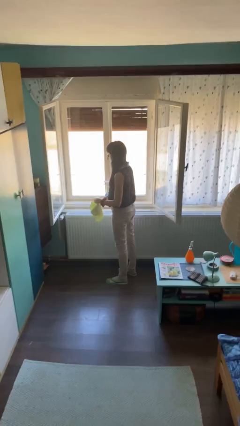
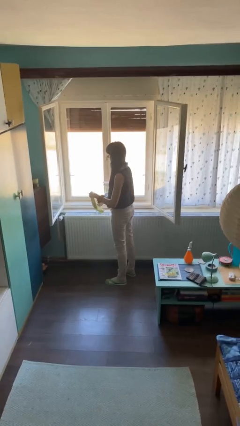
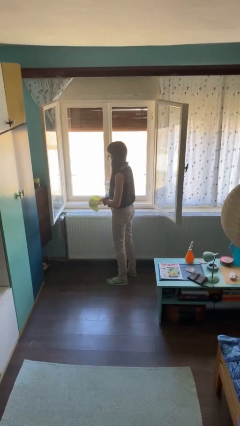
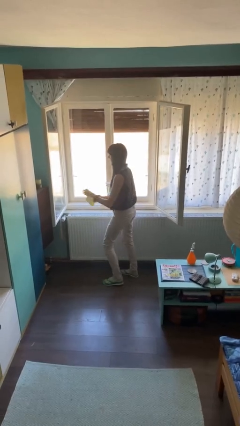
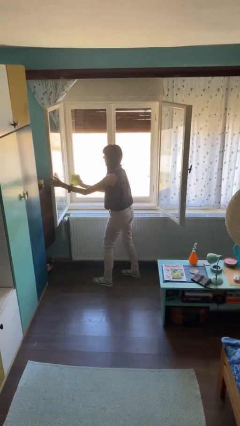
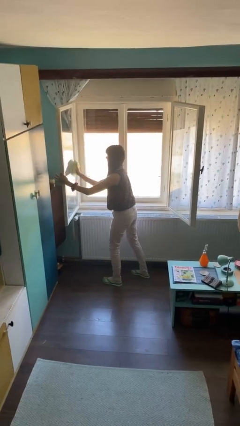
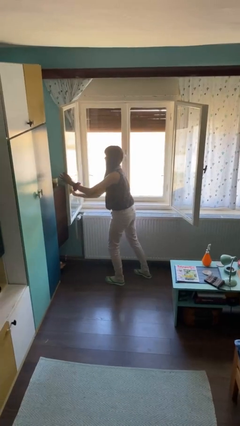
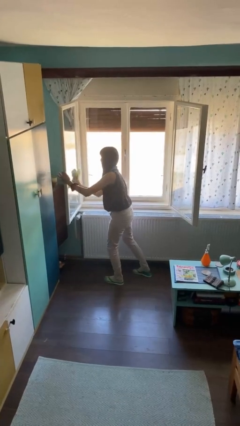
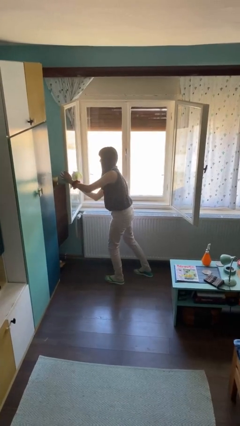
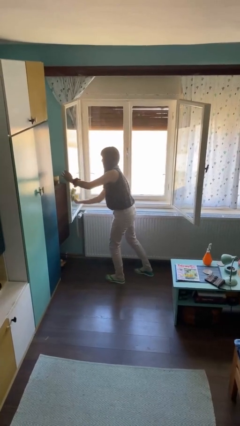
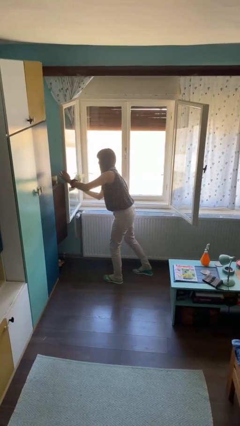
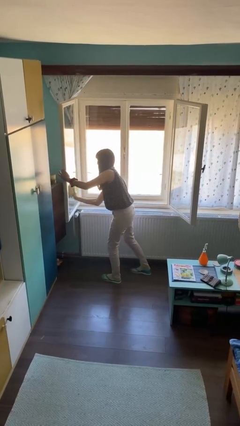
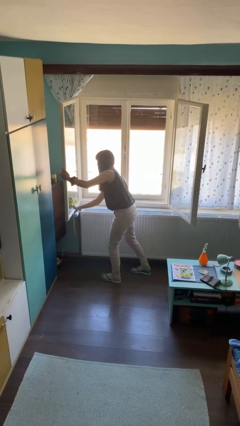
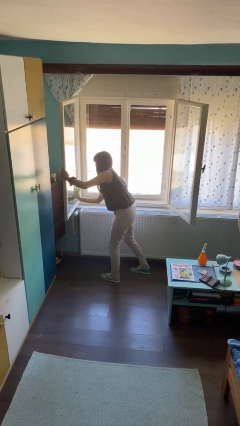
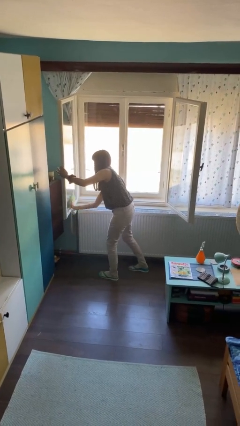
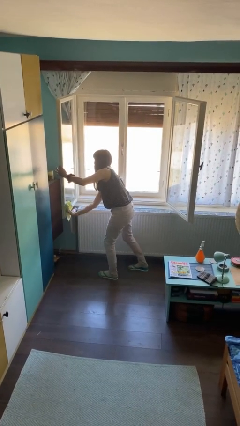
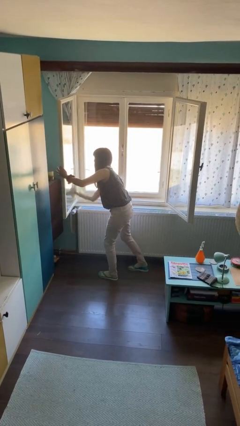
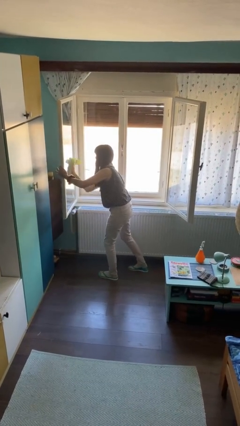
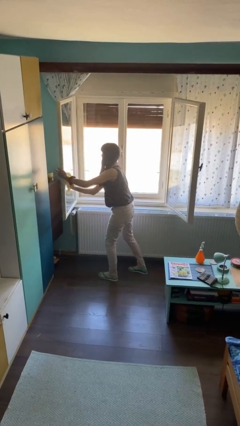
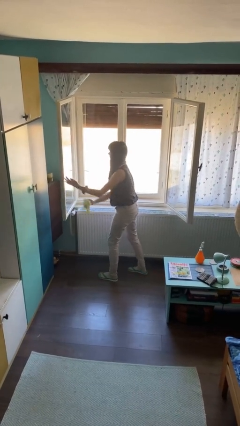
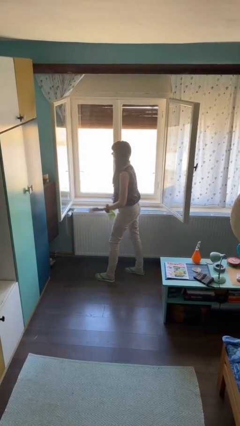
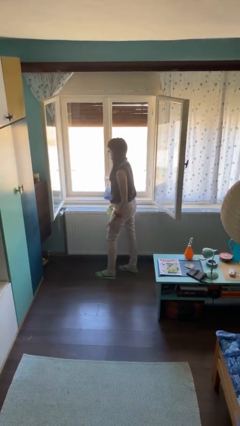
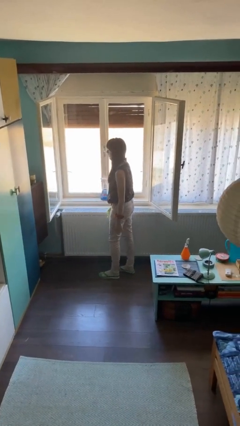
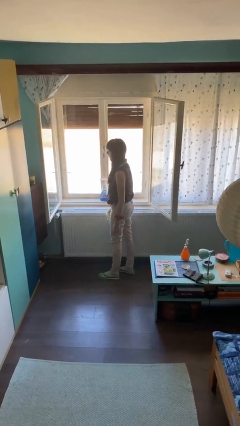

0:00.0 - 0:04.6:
person washes window

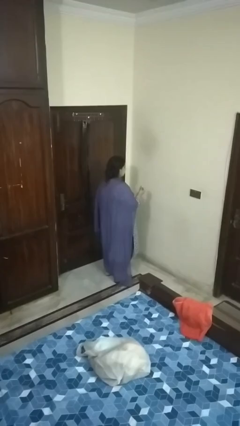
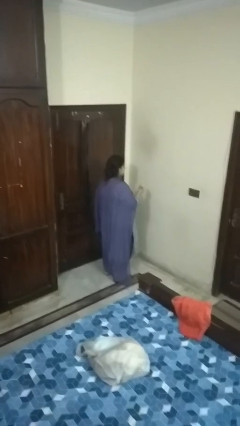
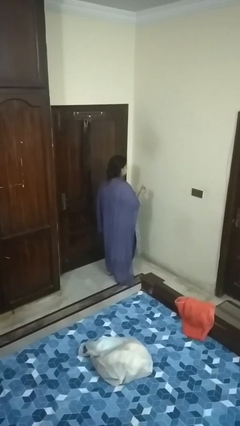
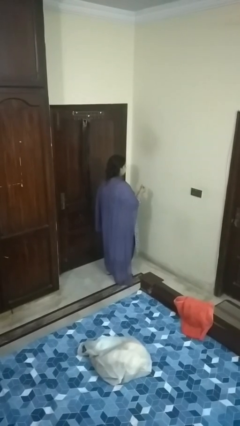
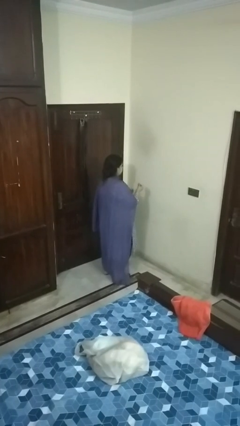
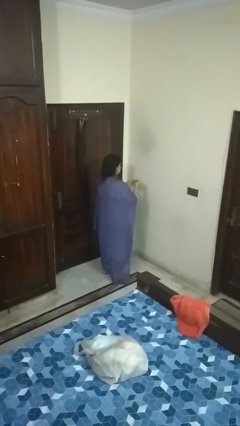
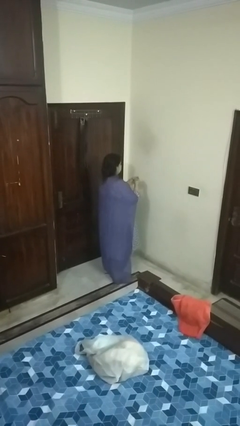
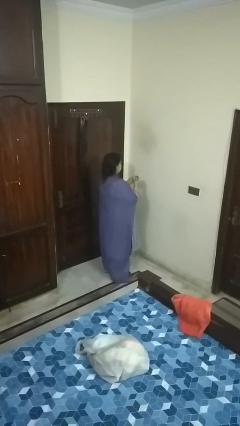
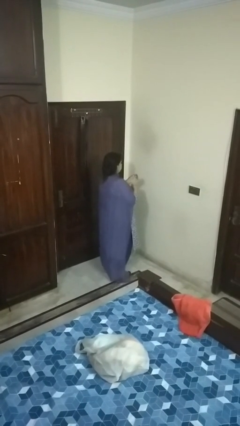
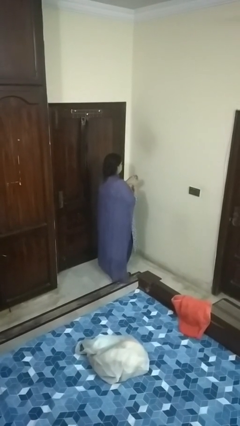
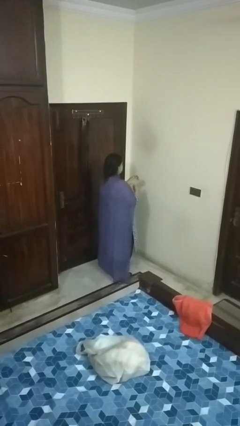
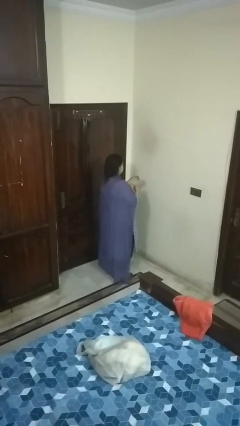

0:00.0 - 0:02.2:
person puts on ring

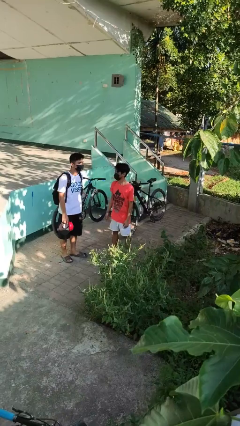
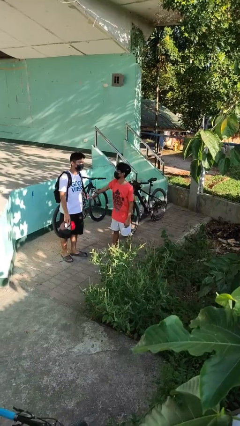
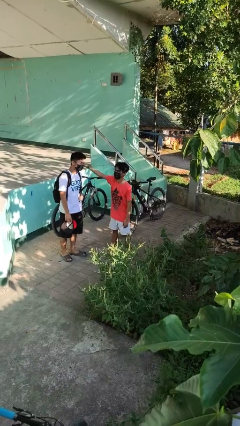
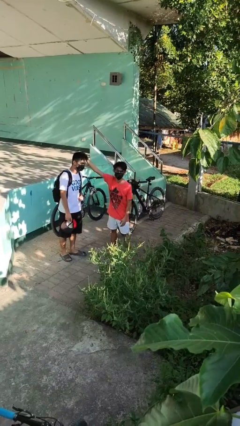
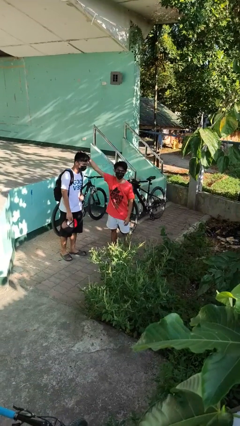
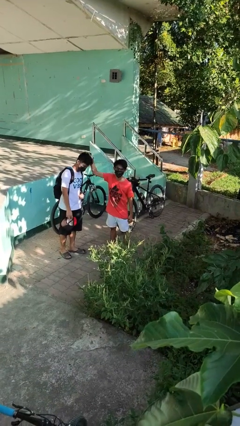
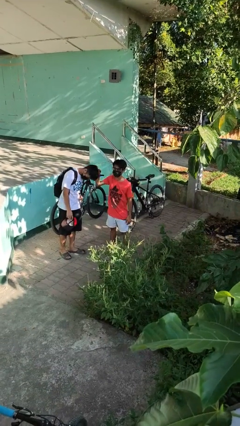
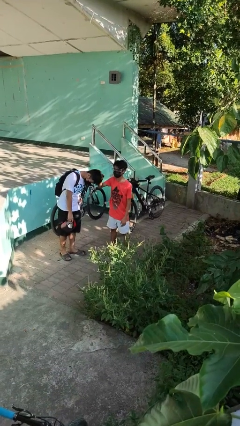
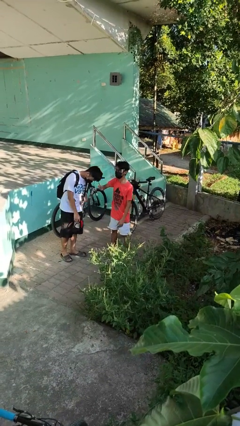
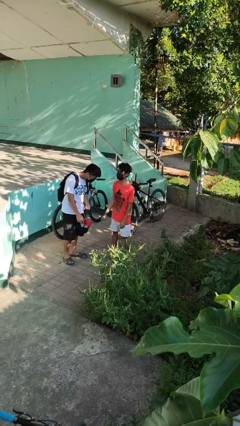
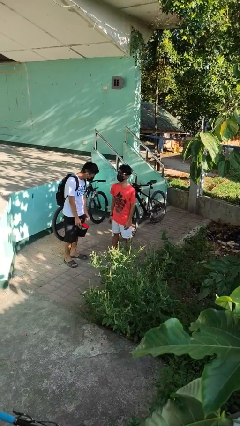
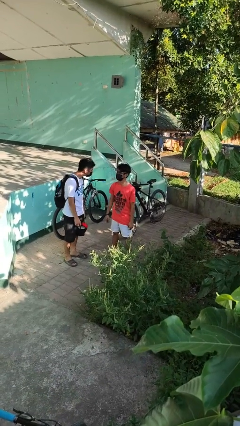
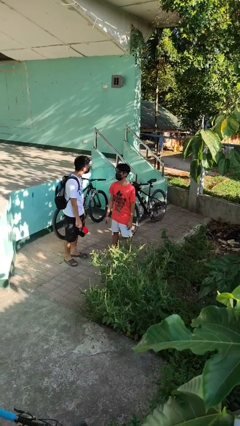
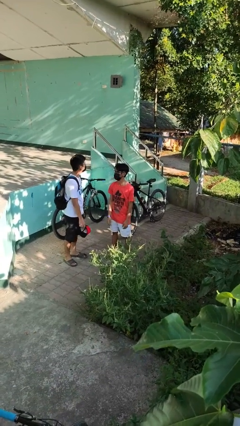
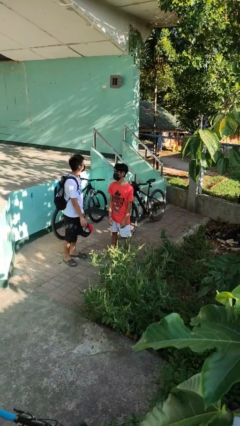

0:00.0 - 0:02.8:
person grabs person by hair

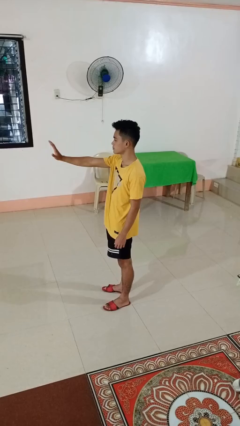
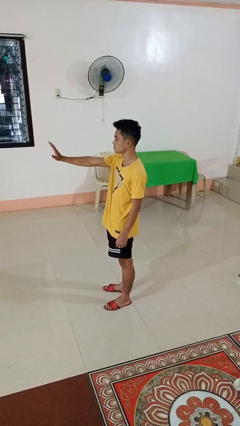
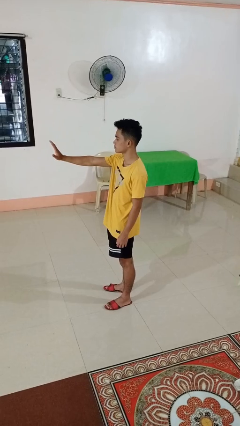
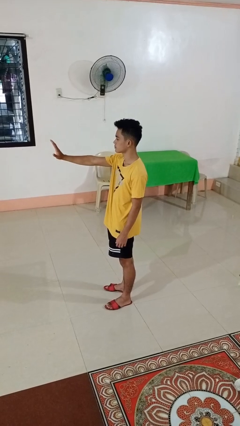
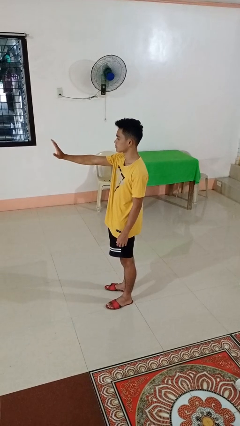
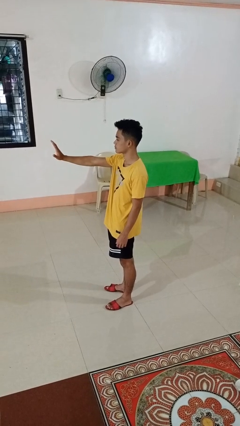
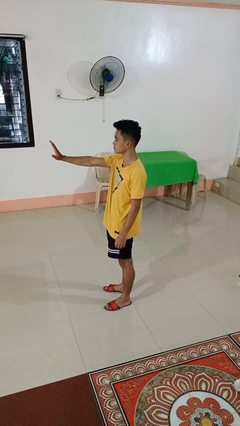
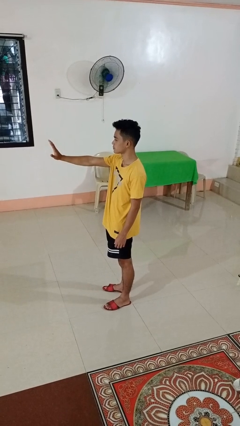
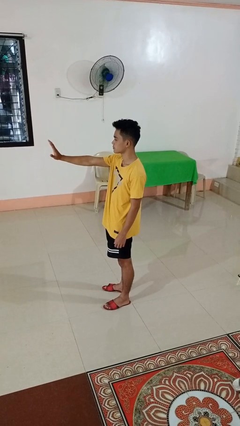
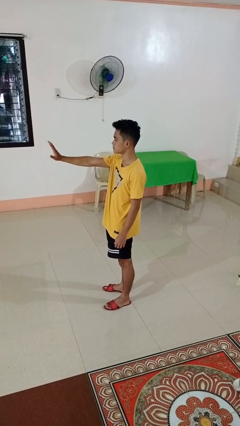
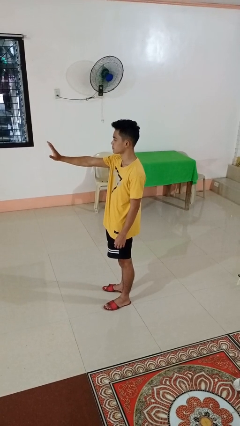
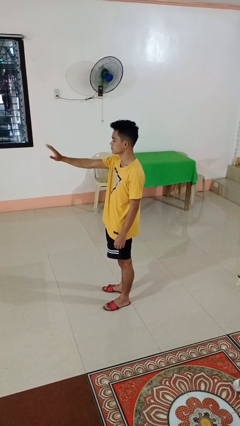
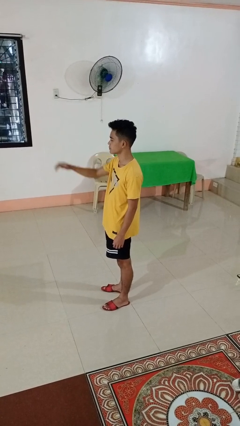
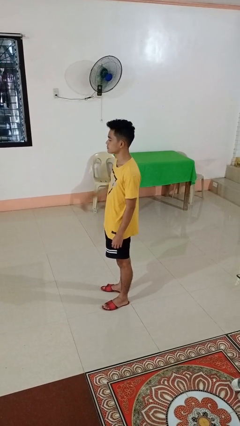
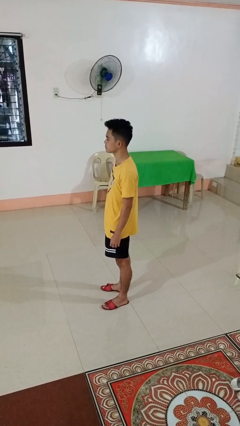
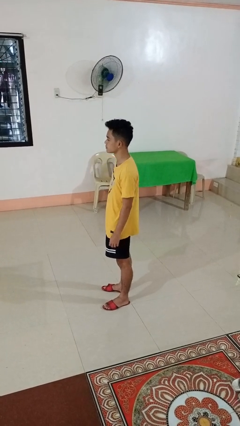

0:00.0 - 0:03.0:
person gestures stop

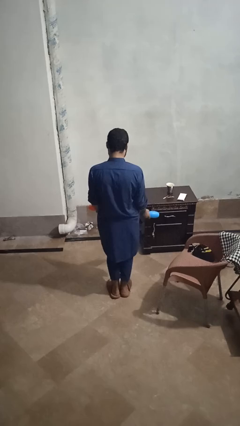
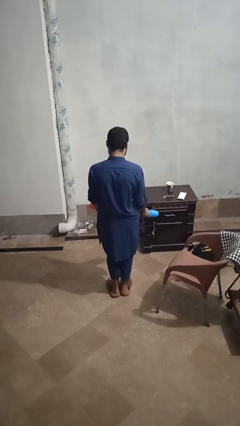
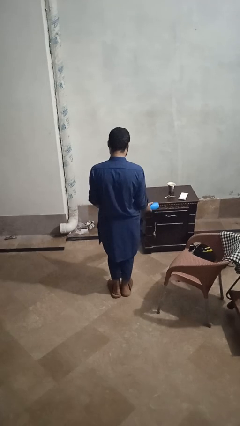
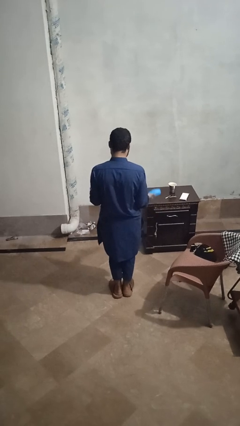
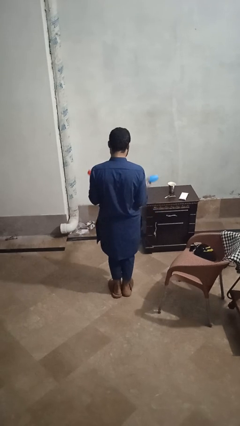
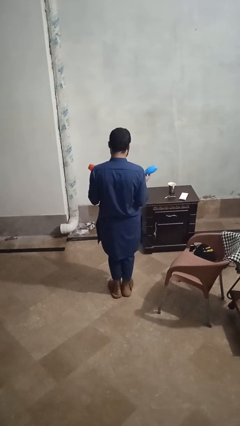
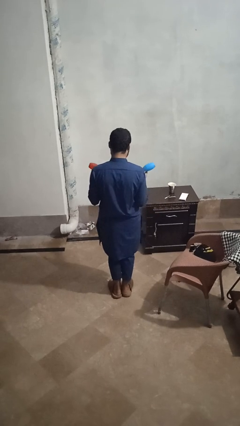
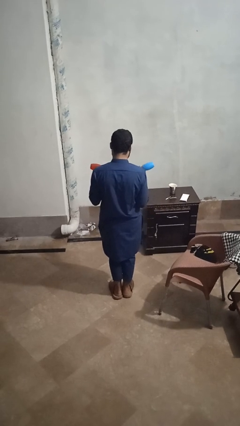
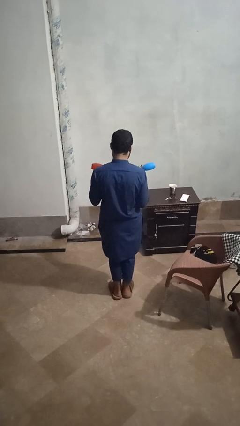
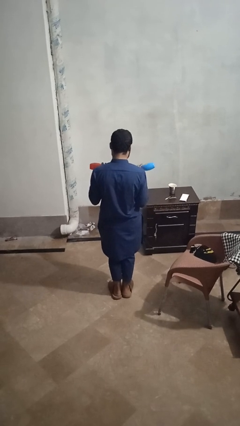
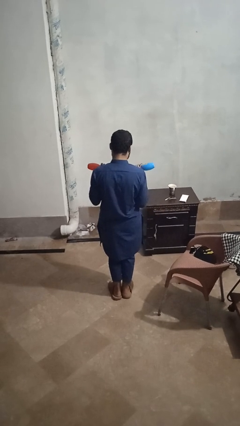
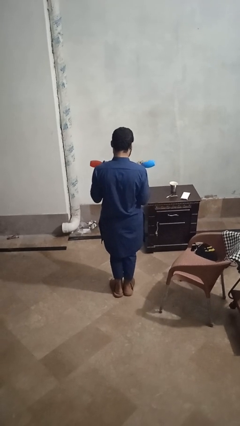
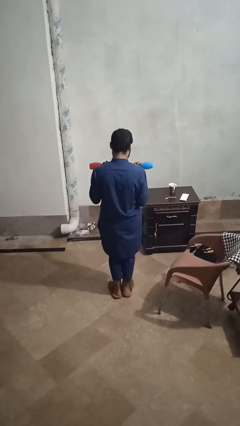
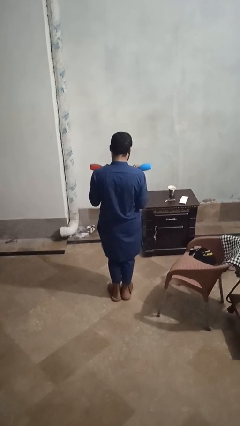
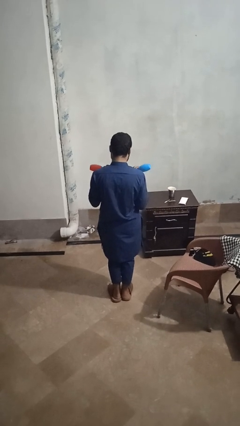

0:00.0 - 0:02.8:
person lifts dumbbells

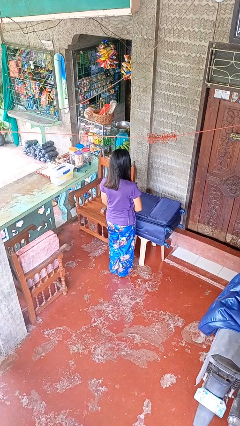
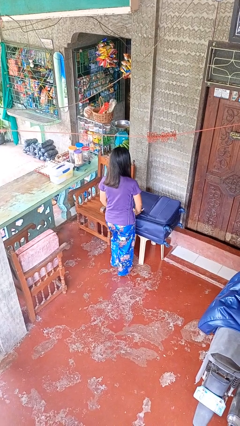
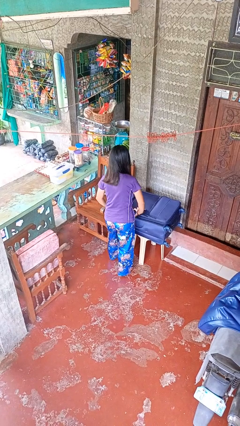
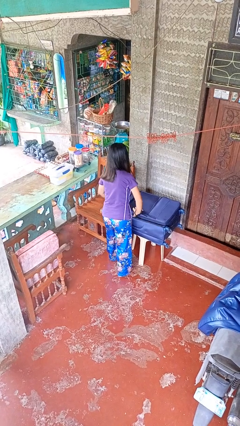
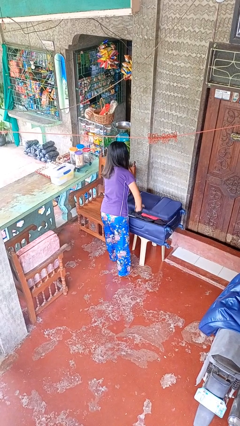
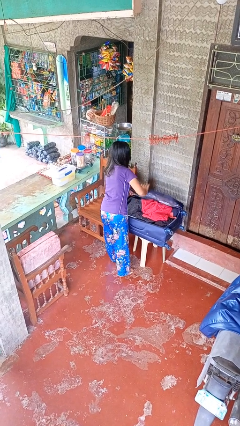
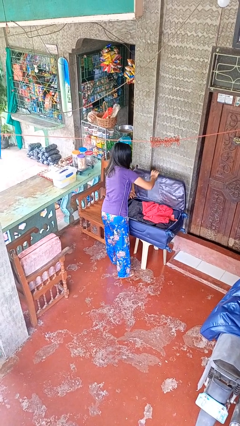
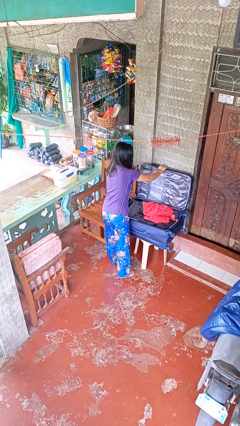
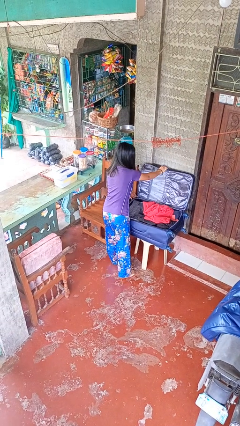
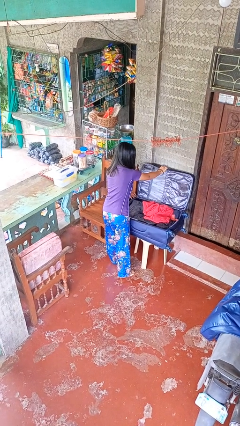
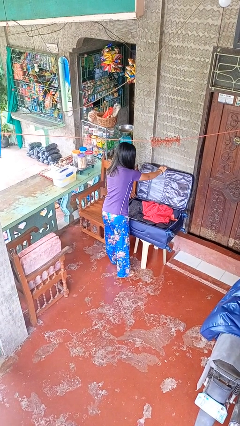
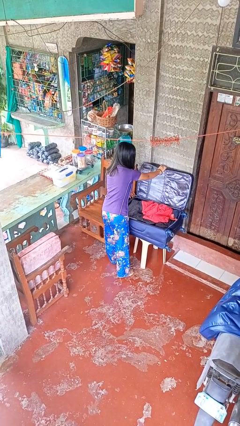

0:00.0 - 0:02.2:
person opens suitcase
